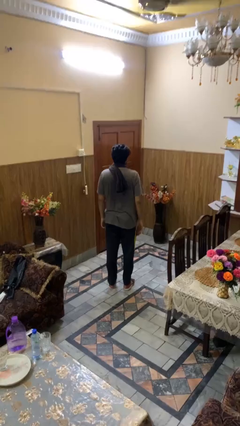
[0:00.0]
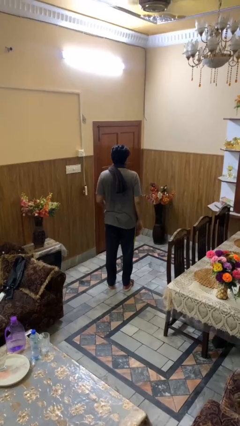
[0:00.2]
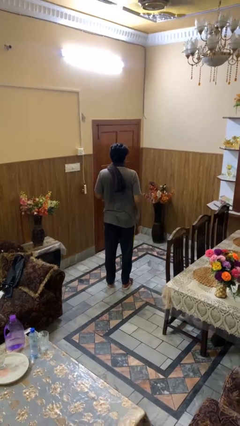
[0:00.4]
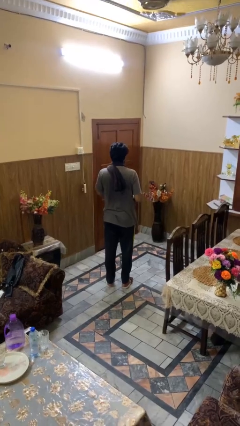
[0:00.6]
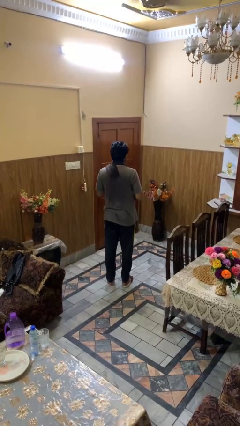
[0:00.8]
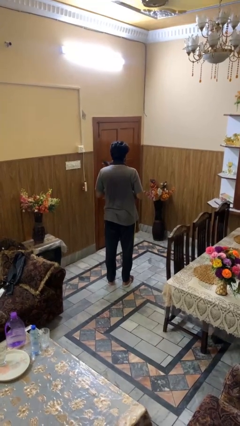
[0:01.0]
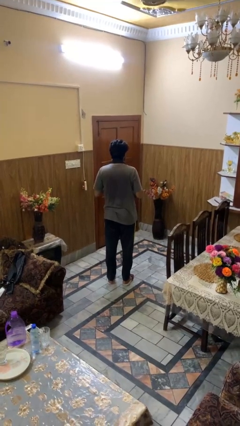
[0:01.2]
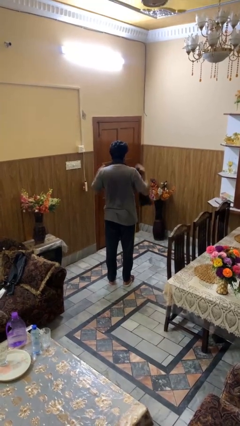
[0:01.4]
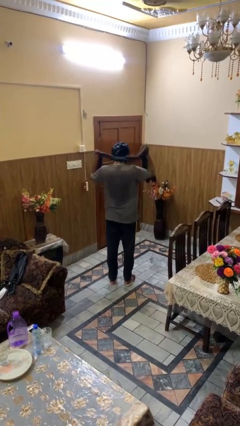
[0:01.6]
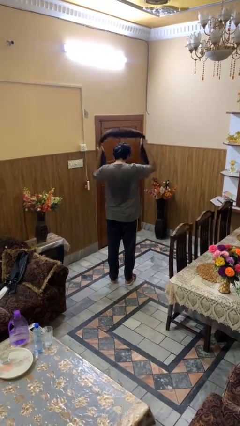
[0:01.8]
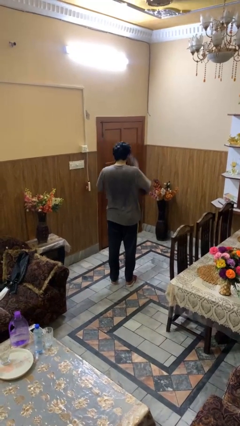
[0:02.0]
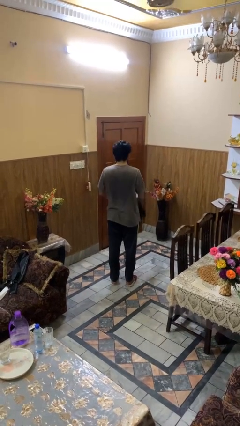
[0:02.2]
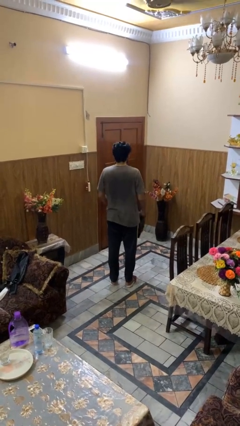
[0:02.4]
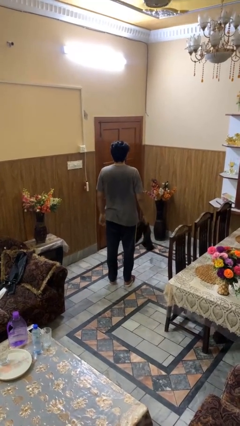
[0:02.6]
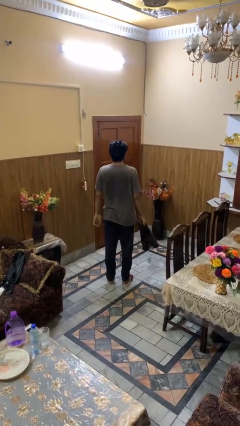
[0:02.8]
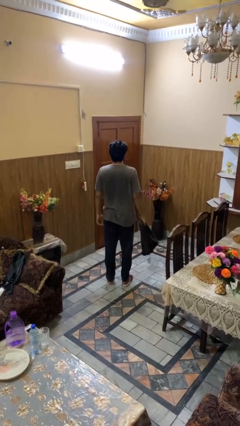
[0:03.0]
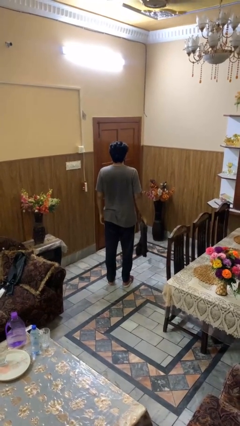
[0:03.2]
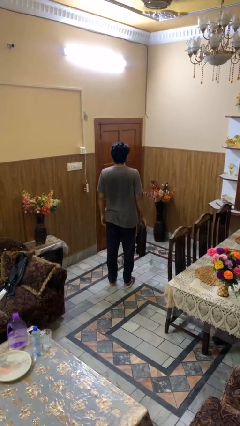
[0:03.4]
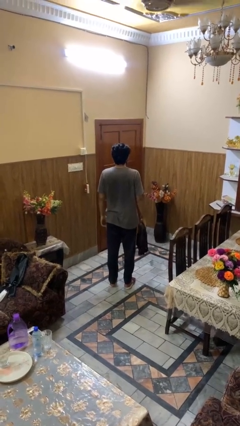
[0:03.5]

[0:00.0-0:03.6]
person takes off scarf

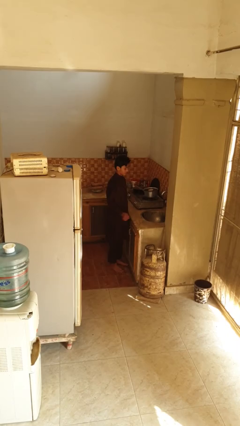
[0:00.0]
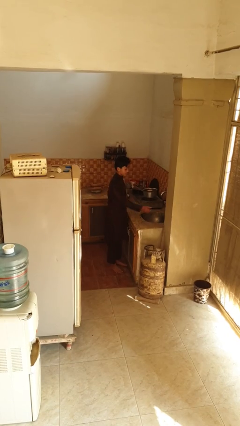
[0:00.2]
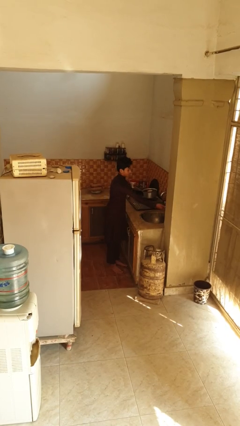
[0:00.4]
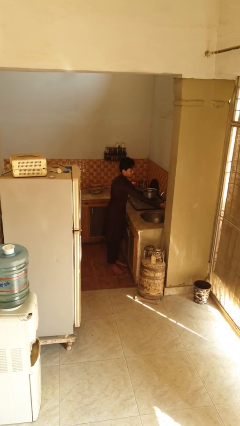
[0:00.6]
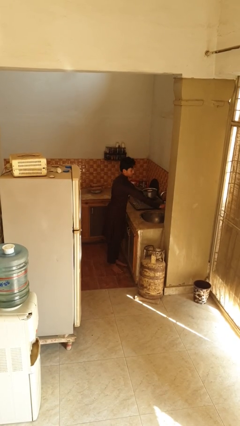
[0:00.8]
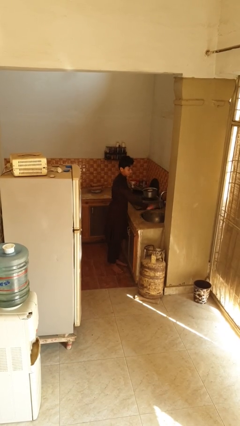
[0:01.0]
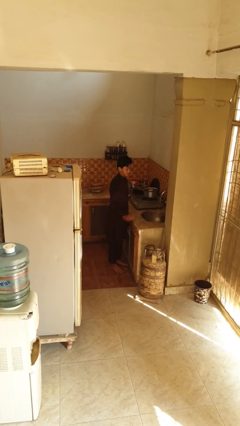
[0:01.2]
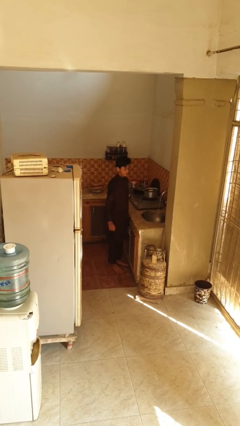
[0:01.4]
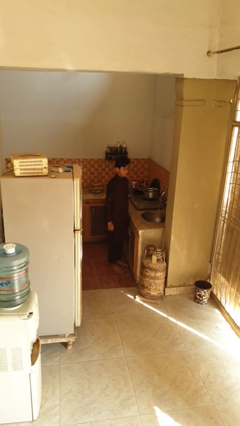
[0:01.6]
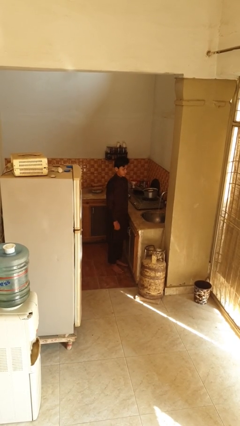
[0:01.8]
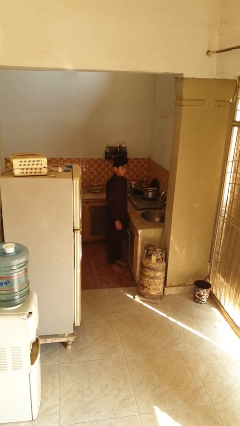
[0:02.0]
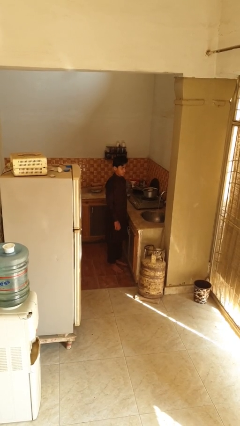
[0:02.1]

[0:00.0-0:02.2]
person turns on faucet

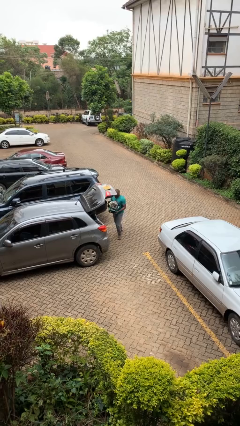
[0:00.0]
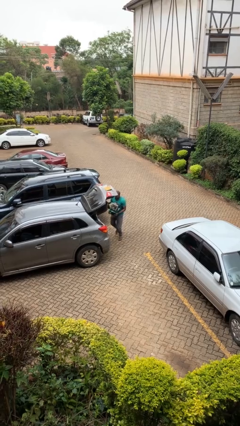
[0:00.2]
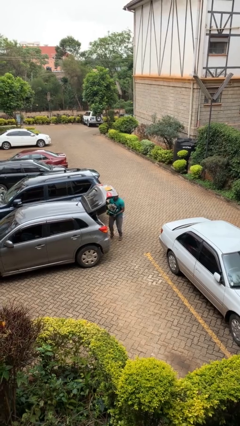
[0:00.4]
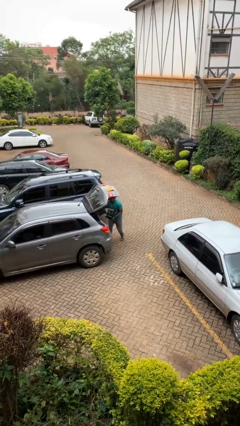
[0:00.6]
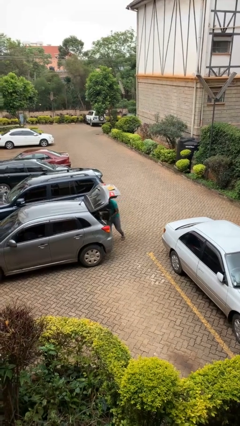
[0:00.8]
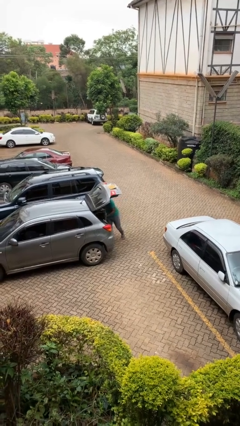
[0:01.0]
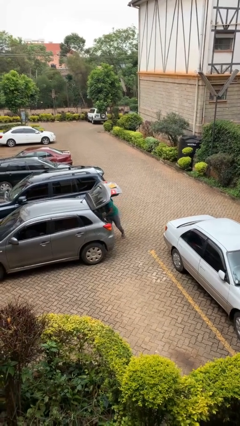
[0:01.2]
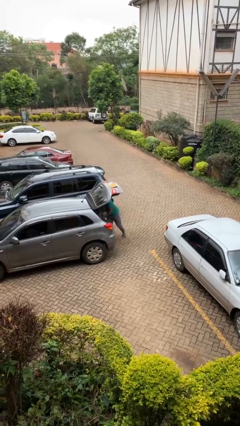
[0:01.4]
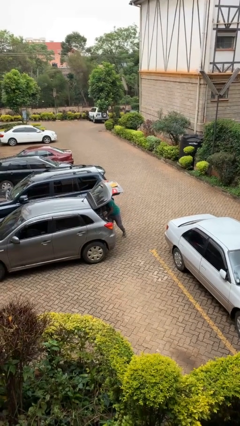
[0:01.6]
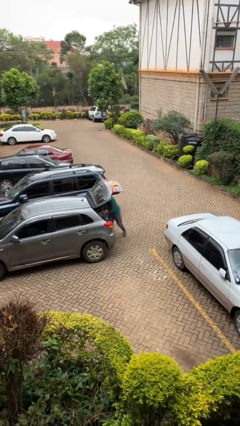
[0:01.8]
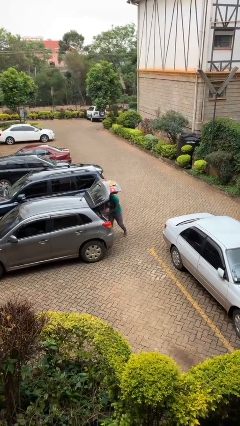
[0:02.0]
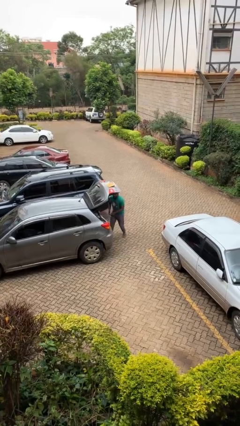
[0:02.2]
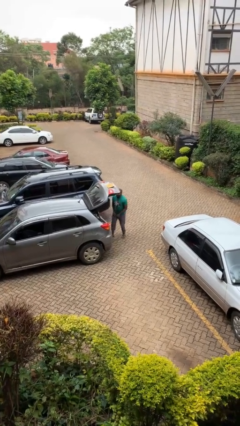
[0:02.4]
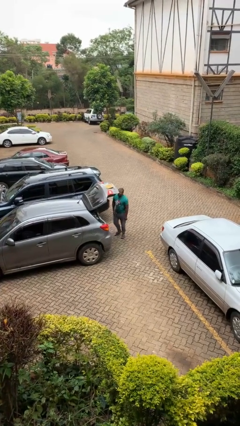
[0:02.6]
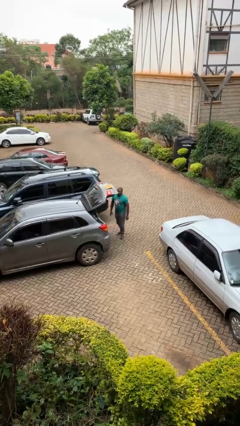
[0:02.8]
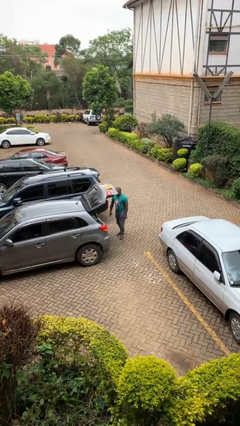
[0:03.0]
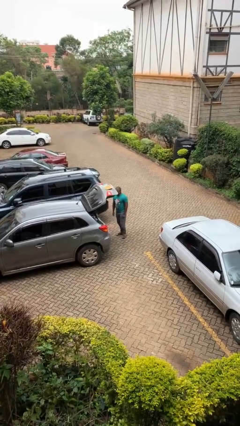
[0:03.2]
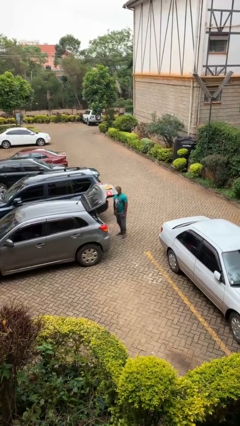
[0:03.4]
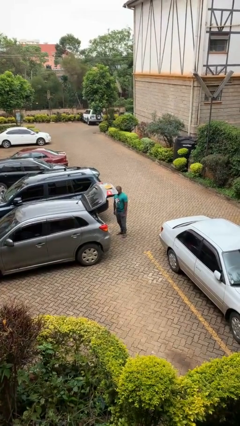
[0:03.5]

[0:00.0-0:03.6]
person loads car

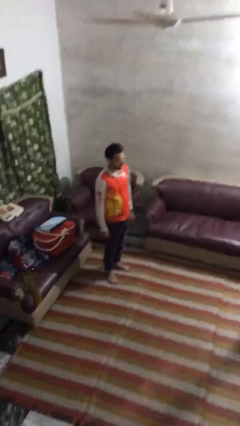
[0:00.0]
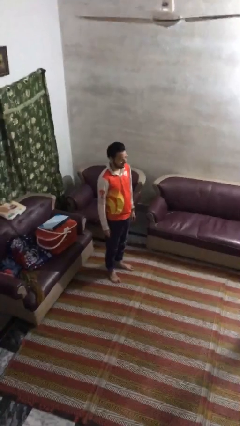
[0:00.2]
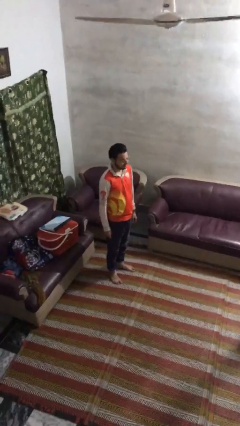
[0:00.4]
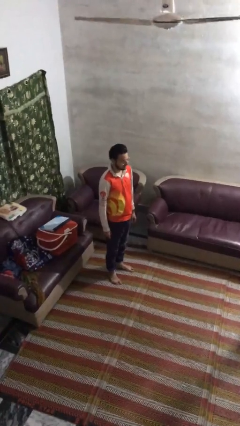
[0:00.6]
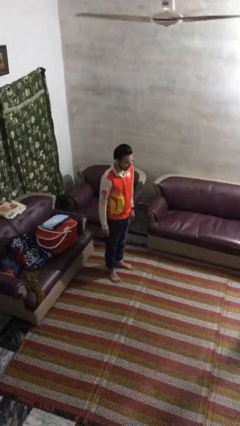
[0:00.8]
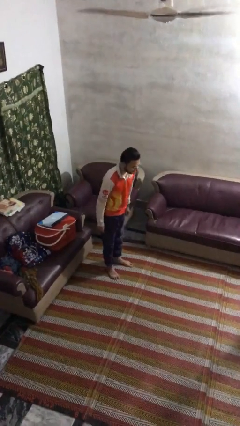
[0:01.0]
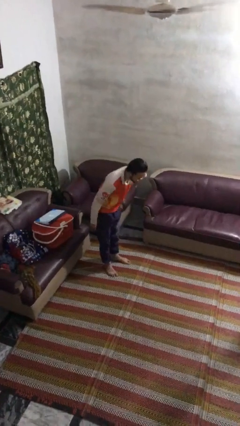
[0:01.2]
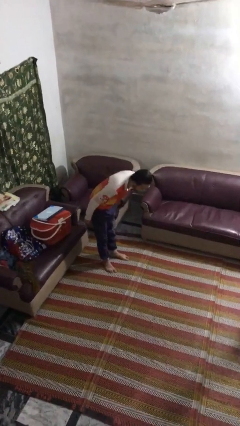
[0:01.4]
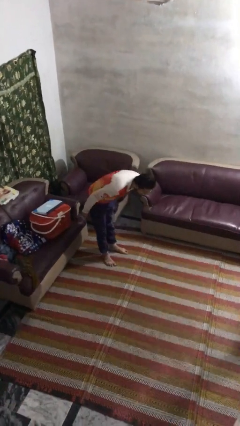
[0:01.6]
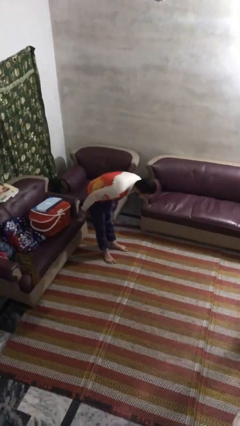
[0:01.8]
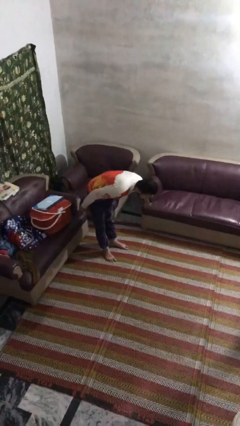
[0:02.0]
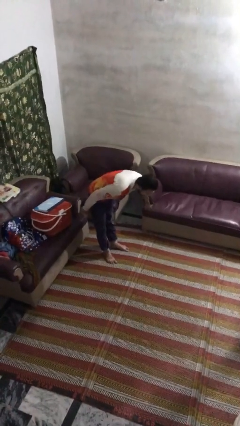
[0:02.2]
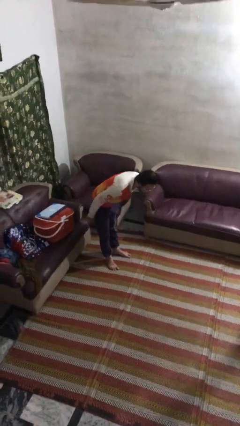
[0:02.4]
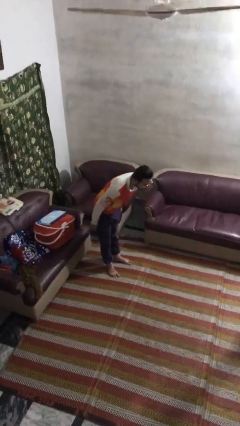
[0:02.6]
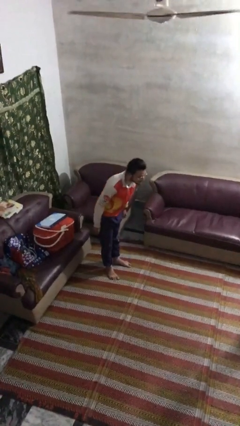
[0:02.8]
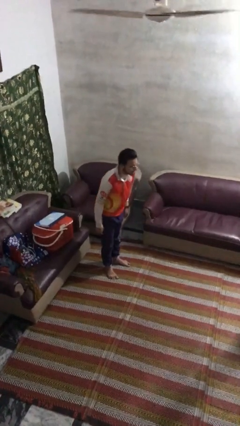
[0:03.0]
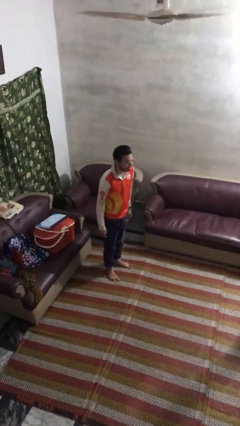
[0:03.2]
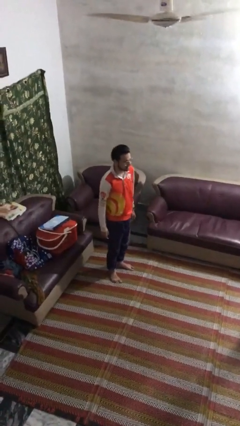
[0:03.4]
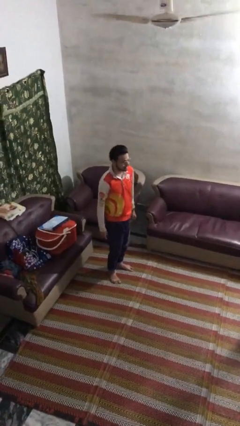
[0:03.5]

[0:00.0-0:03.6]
person bows

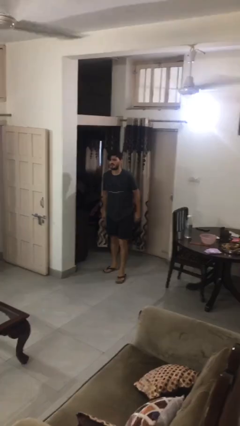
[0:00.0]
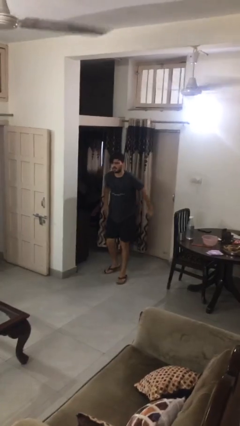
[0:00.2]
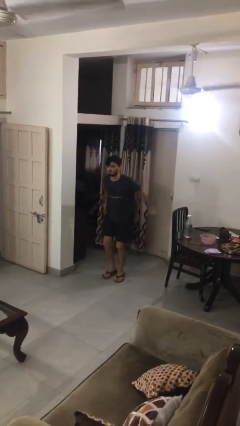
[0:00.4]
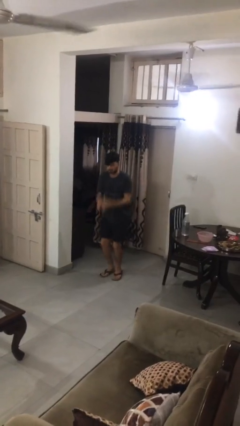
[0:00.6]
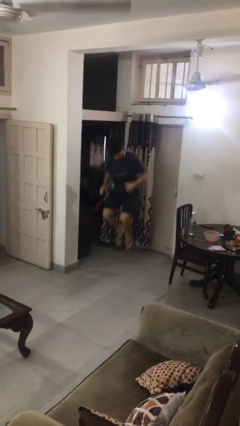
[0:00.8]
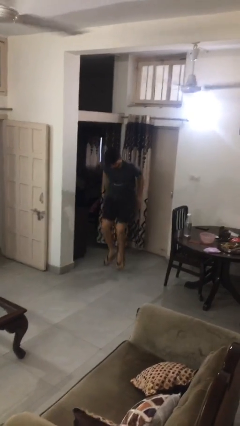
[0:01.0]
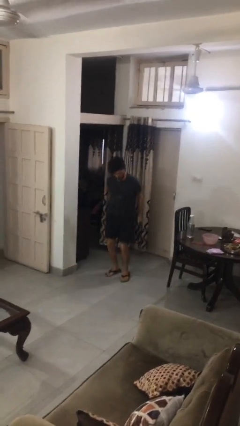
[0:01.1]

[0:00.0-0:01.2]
person jumps

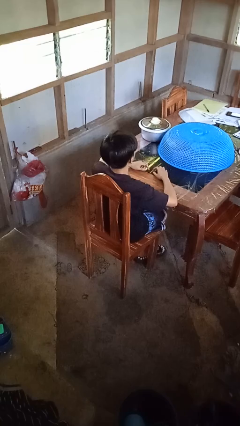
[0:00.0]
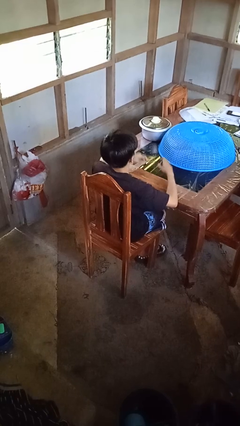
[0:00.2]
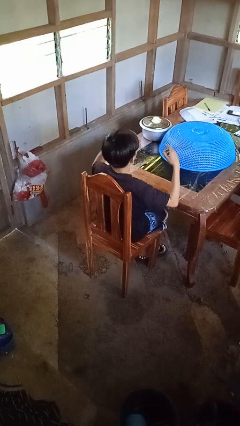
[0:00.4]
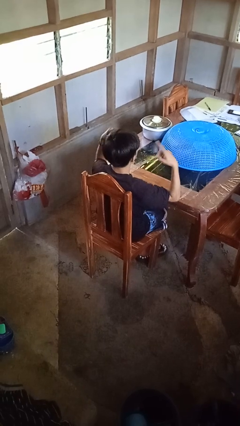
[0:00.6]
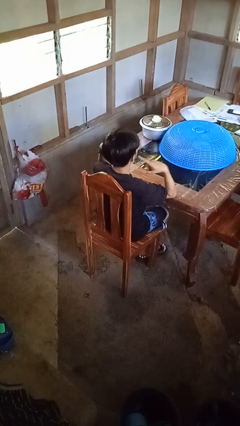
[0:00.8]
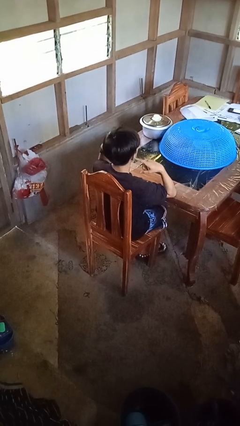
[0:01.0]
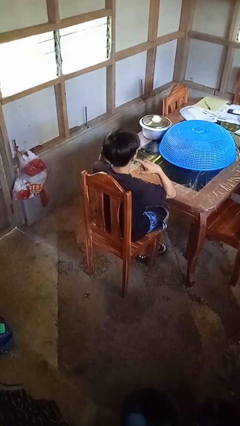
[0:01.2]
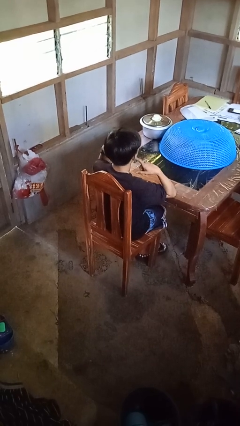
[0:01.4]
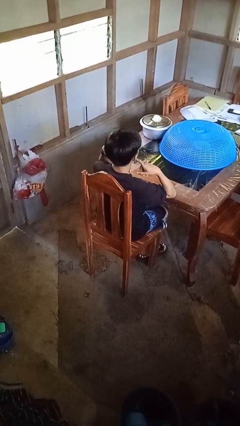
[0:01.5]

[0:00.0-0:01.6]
person puts fingers in ear

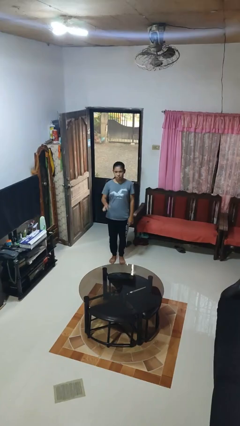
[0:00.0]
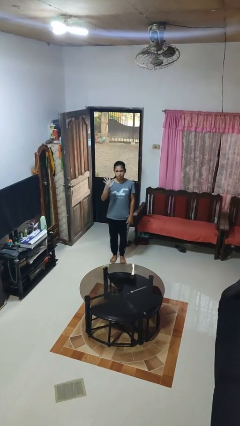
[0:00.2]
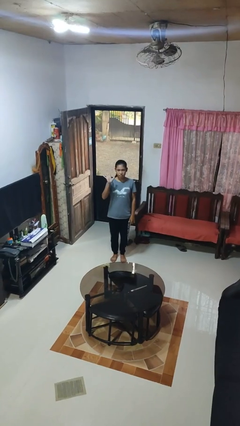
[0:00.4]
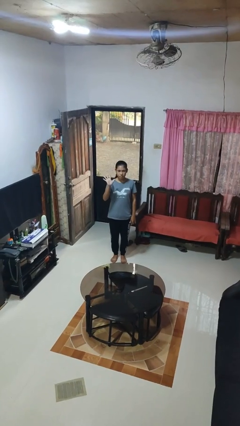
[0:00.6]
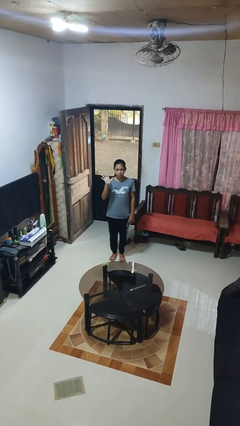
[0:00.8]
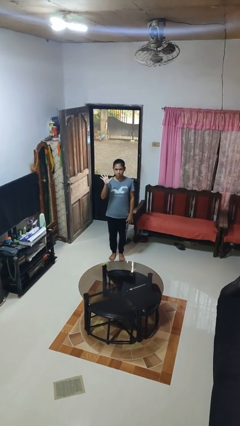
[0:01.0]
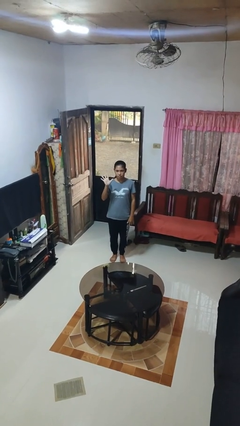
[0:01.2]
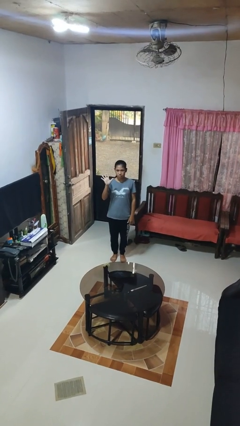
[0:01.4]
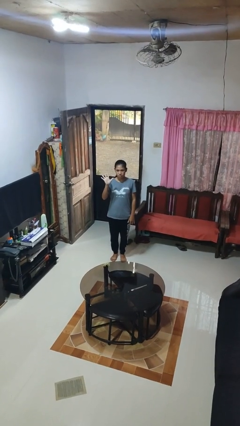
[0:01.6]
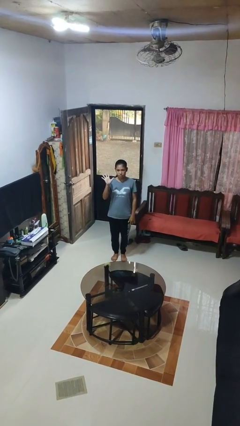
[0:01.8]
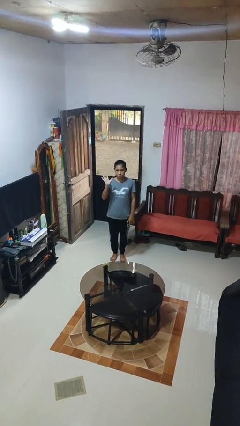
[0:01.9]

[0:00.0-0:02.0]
person gestures number five
